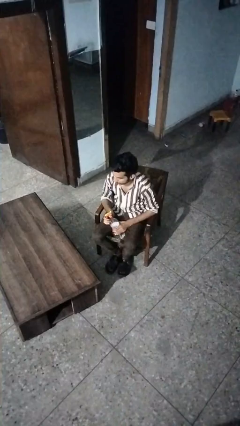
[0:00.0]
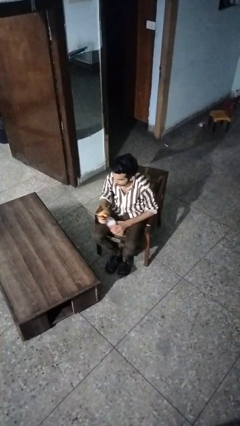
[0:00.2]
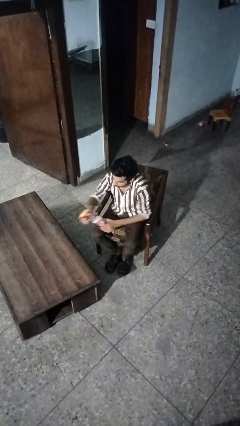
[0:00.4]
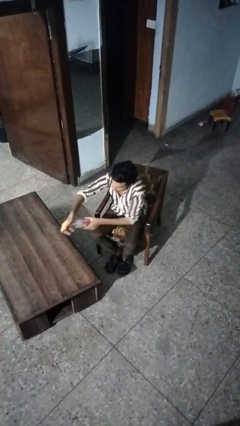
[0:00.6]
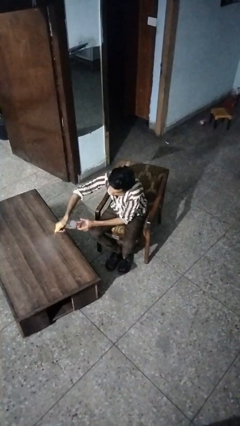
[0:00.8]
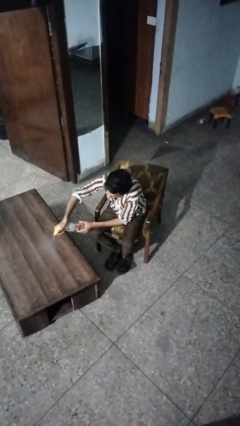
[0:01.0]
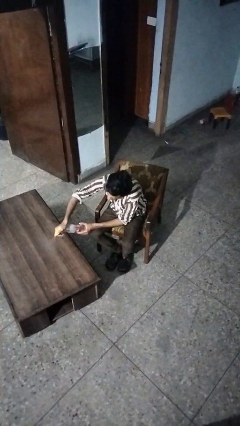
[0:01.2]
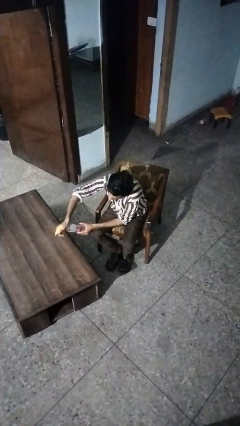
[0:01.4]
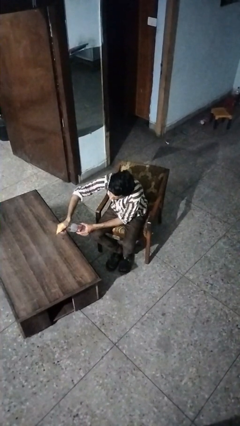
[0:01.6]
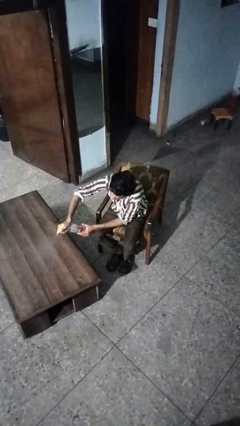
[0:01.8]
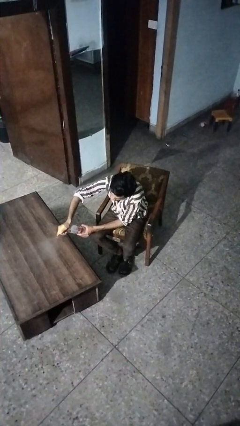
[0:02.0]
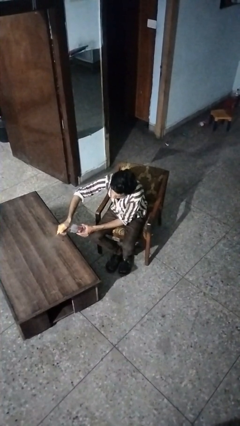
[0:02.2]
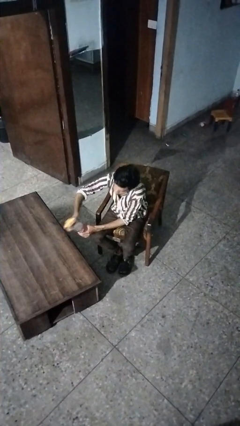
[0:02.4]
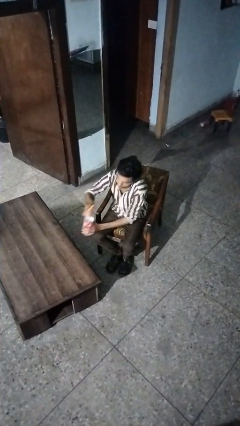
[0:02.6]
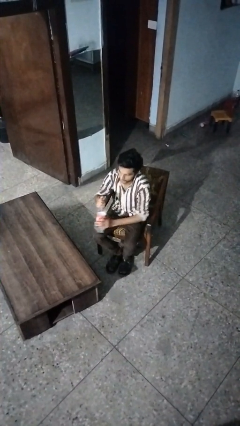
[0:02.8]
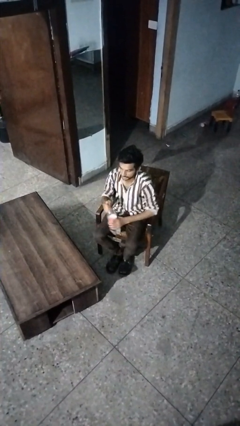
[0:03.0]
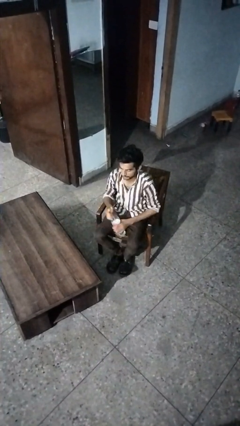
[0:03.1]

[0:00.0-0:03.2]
person sprays from bottle

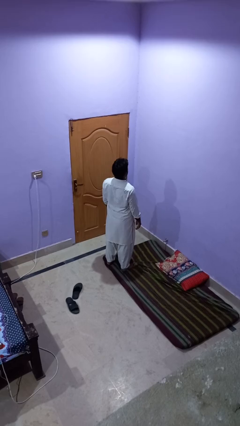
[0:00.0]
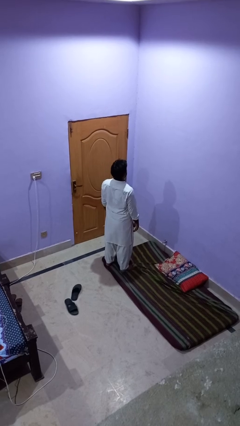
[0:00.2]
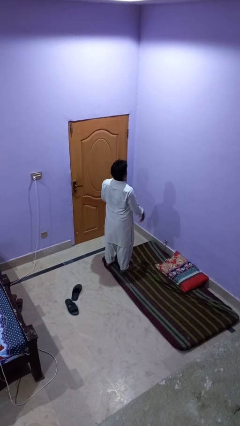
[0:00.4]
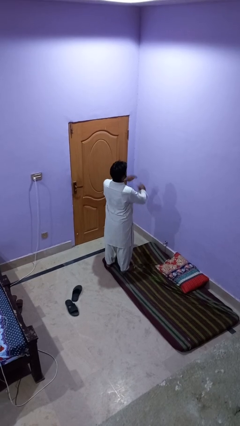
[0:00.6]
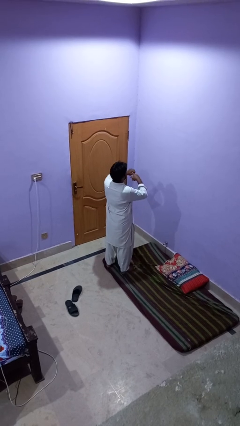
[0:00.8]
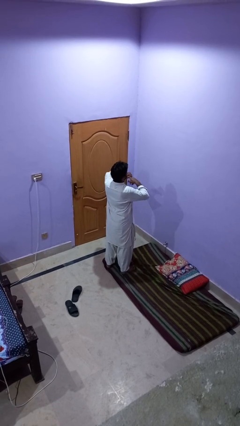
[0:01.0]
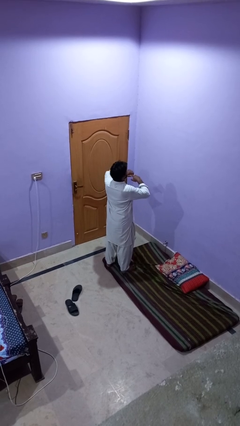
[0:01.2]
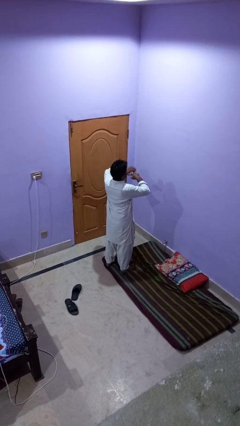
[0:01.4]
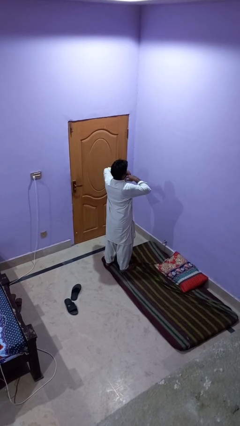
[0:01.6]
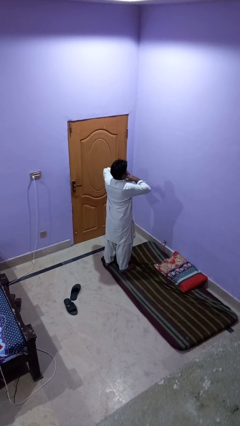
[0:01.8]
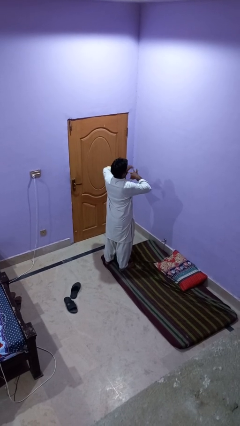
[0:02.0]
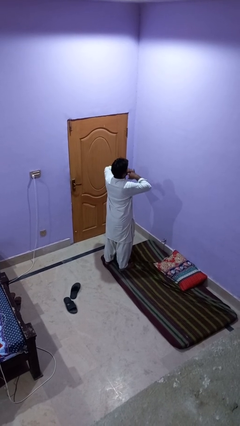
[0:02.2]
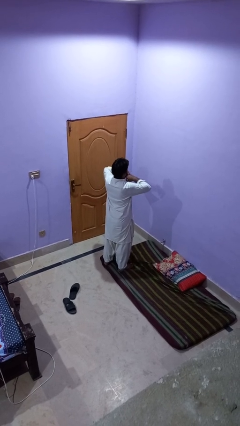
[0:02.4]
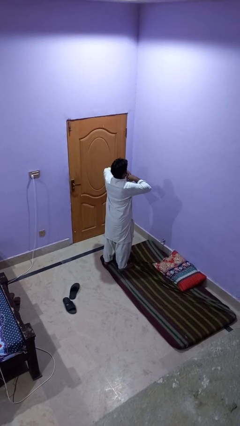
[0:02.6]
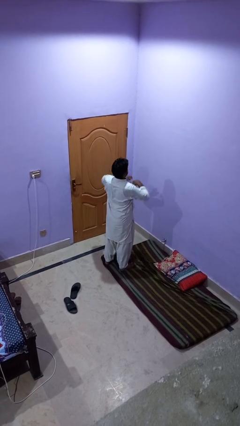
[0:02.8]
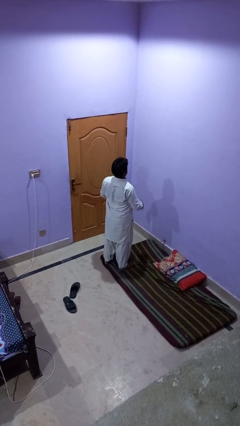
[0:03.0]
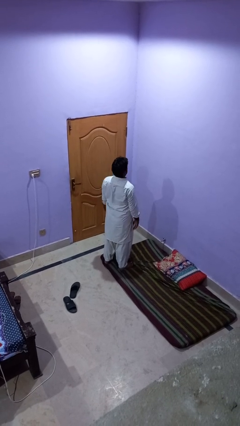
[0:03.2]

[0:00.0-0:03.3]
person snaps fingers

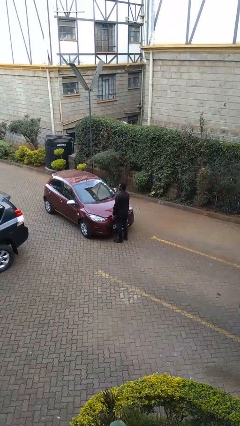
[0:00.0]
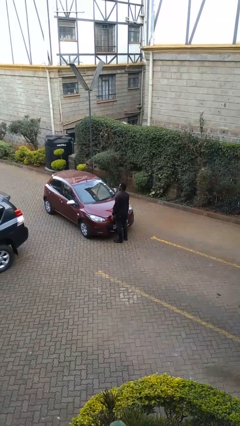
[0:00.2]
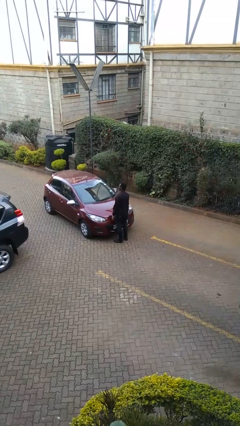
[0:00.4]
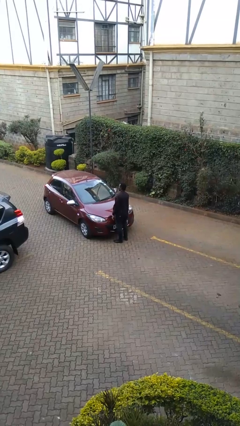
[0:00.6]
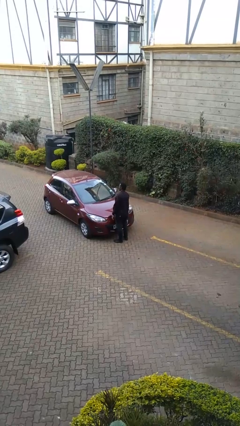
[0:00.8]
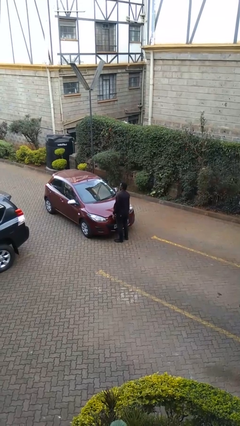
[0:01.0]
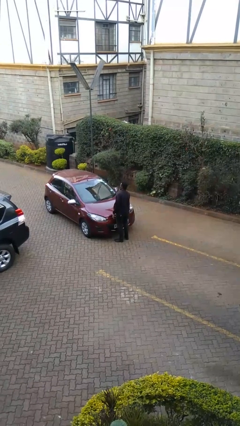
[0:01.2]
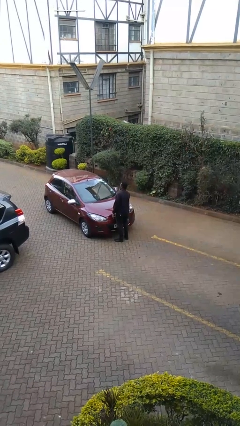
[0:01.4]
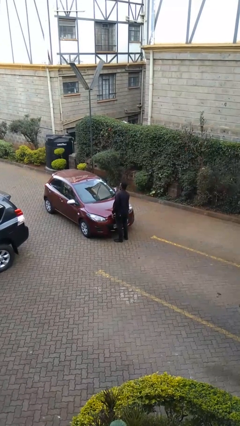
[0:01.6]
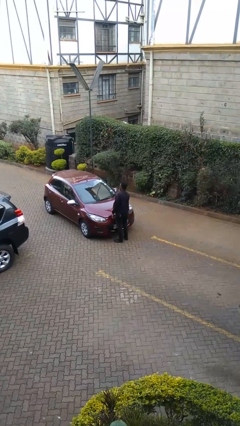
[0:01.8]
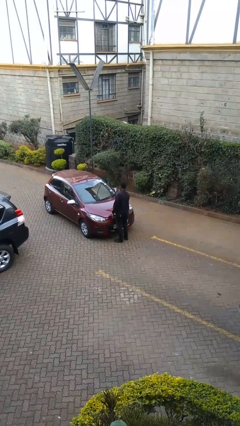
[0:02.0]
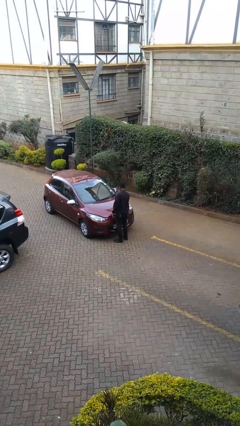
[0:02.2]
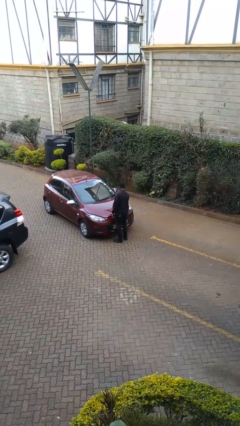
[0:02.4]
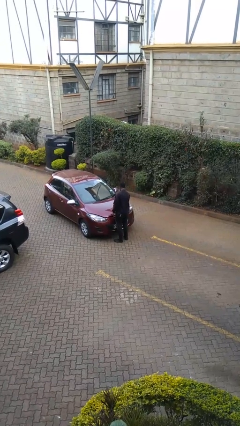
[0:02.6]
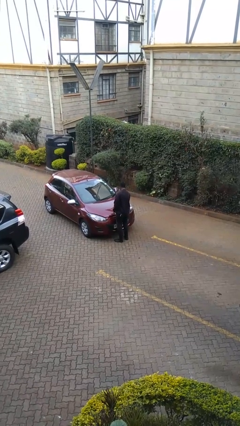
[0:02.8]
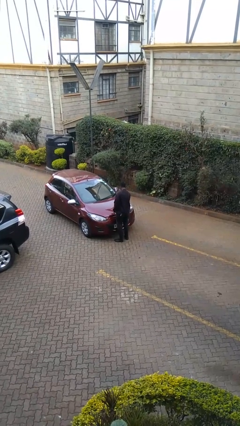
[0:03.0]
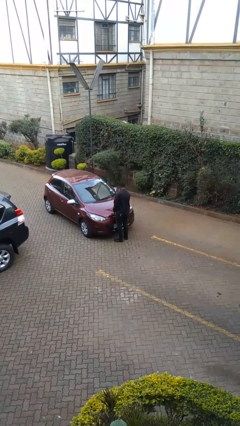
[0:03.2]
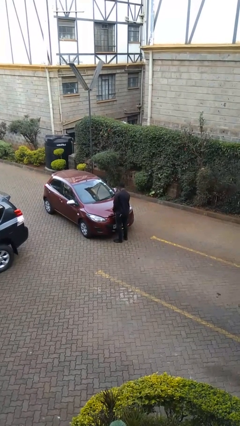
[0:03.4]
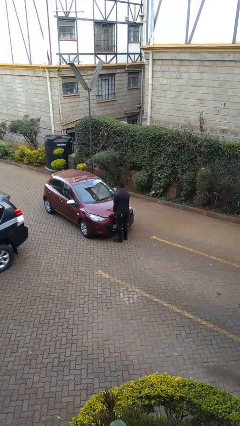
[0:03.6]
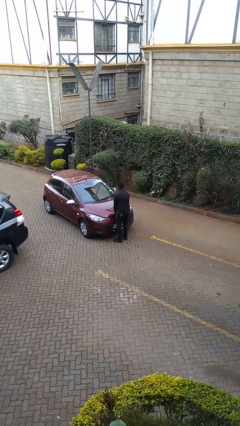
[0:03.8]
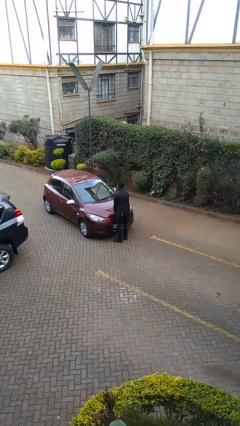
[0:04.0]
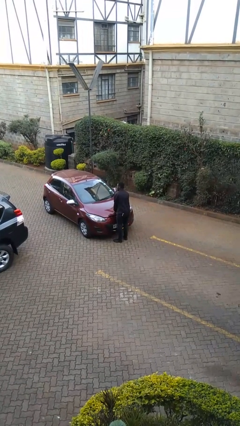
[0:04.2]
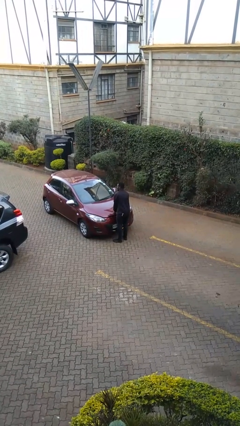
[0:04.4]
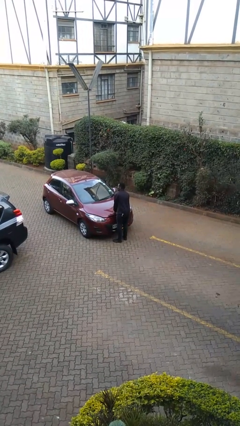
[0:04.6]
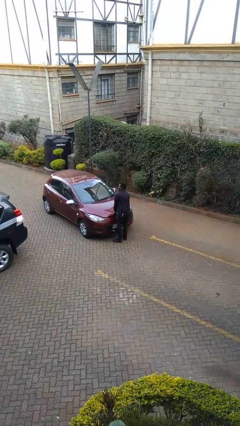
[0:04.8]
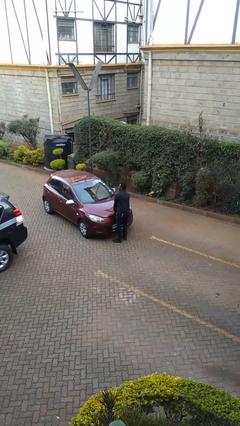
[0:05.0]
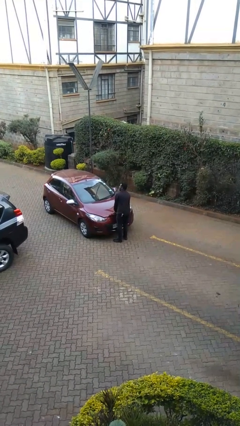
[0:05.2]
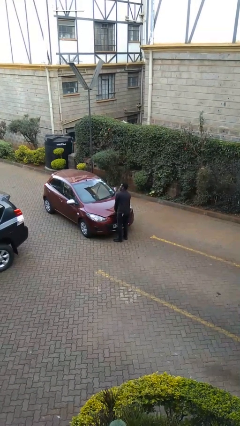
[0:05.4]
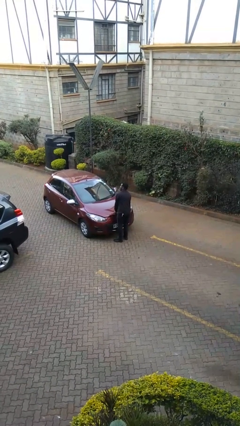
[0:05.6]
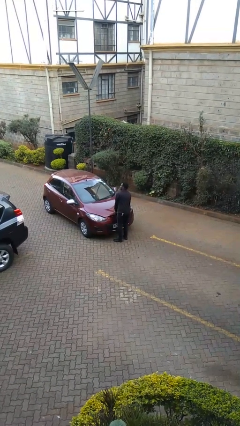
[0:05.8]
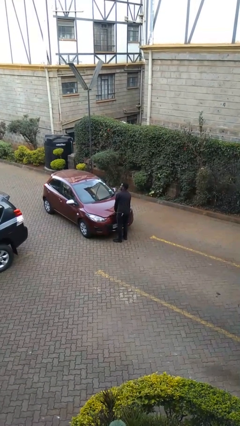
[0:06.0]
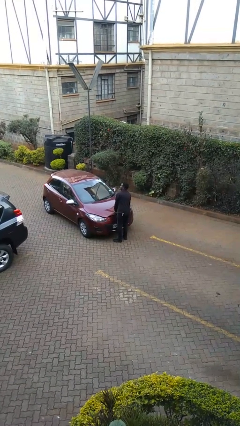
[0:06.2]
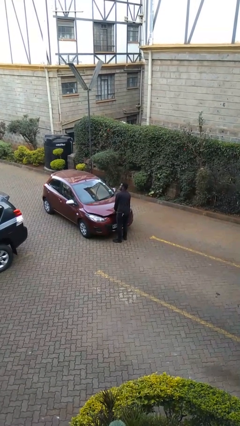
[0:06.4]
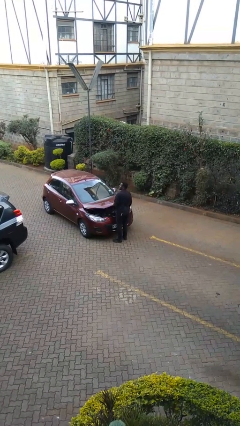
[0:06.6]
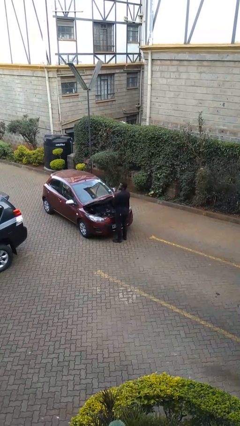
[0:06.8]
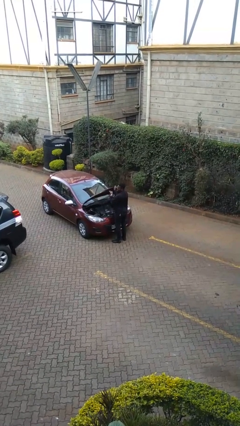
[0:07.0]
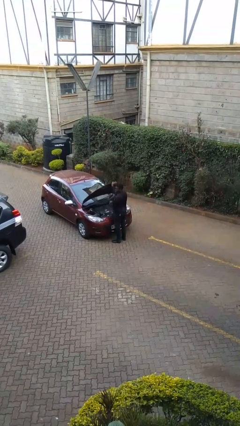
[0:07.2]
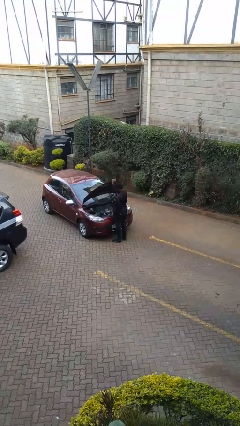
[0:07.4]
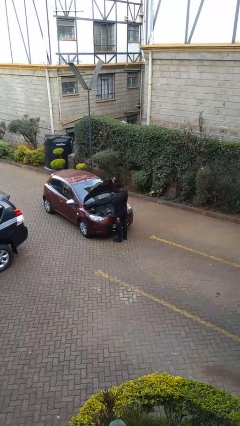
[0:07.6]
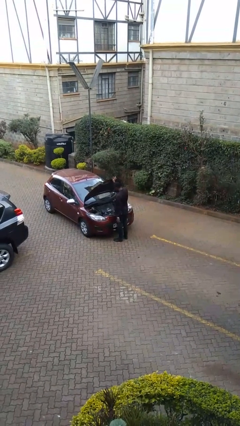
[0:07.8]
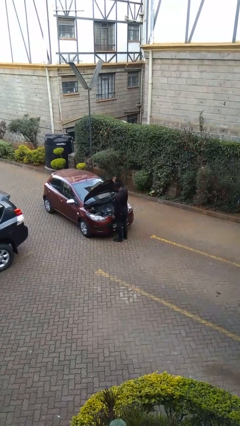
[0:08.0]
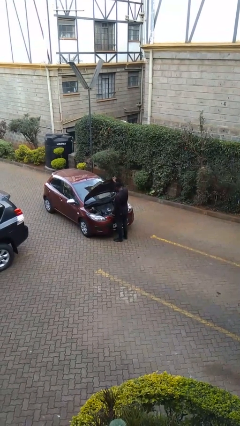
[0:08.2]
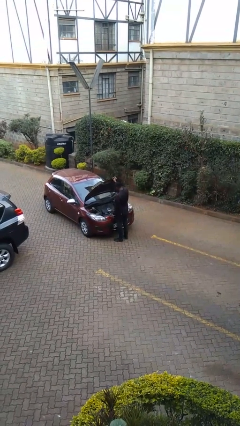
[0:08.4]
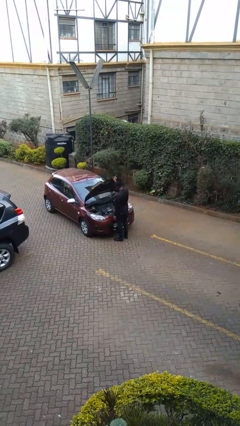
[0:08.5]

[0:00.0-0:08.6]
person opens car hood

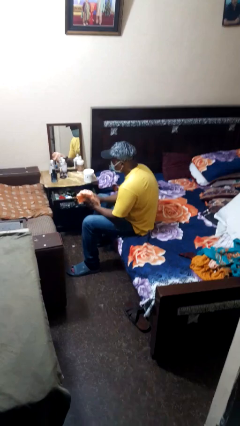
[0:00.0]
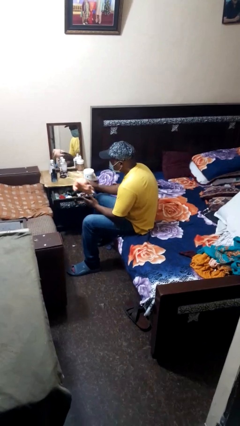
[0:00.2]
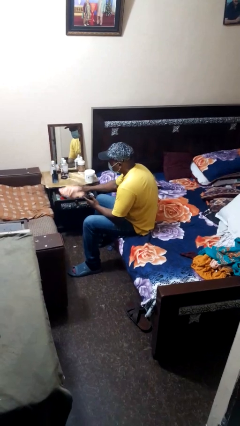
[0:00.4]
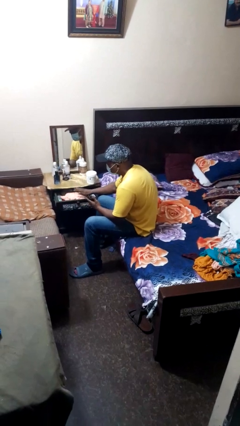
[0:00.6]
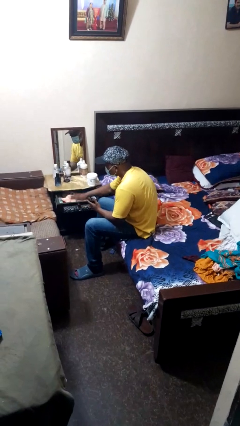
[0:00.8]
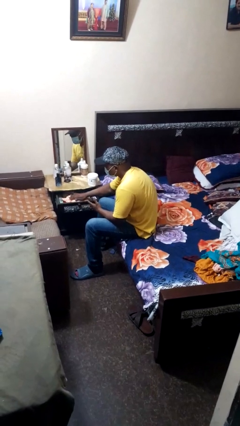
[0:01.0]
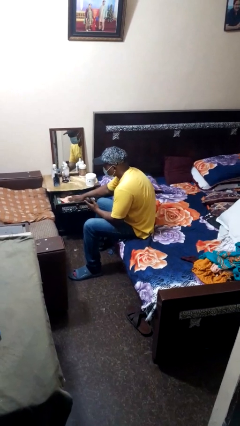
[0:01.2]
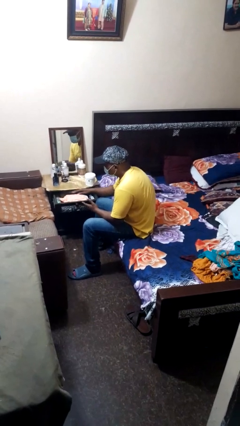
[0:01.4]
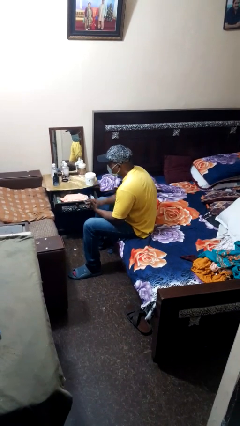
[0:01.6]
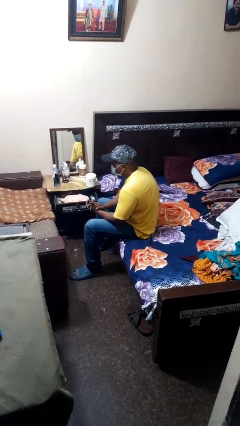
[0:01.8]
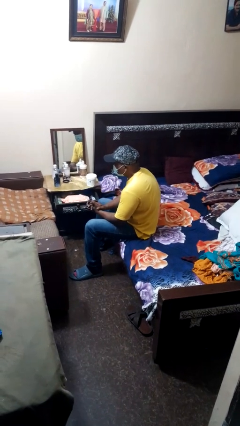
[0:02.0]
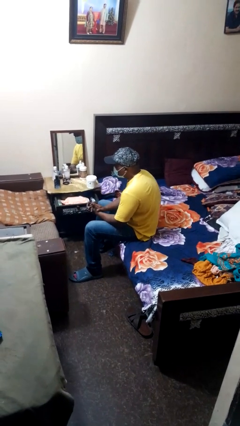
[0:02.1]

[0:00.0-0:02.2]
person puts clothes into dresser

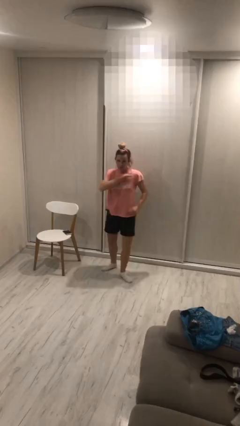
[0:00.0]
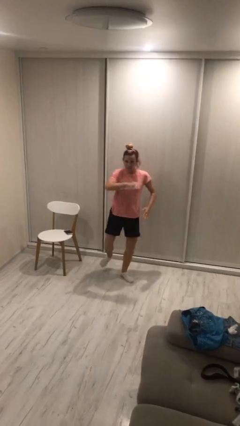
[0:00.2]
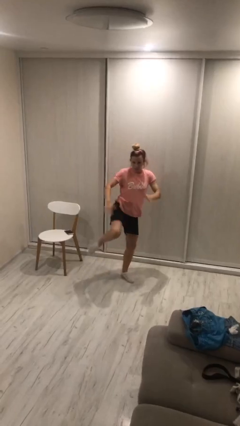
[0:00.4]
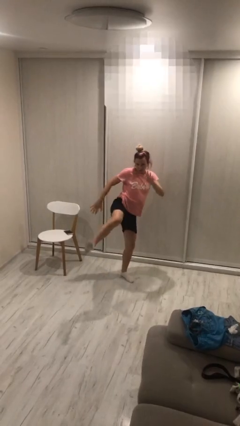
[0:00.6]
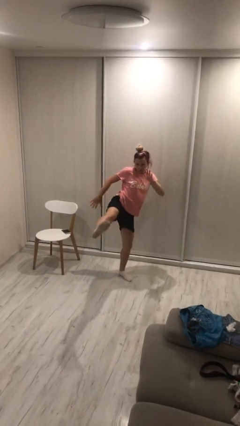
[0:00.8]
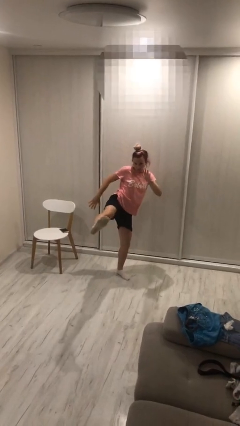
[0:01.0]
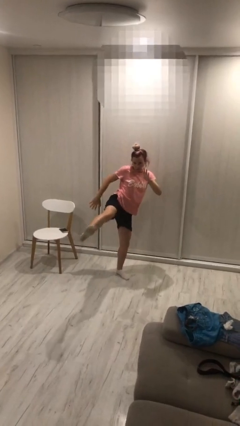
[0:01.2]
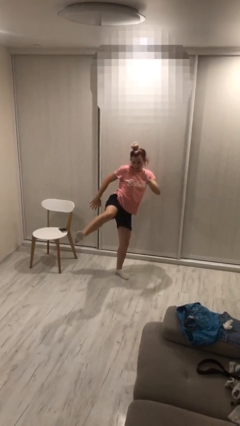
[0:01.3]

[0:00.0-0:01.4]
person karate kicks
